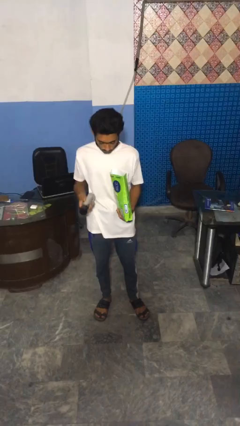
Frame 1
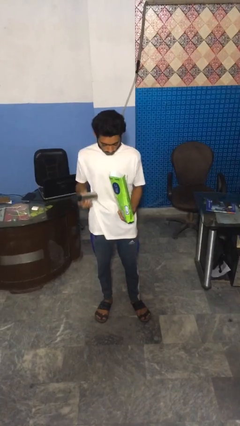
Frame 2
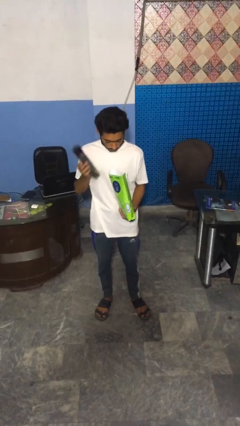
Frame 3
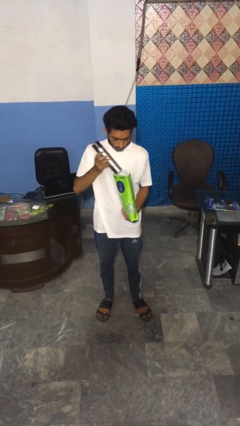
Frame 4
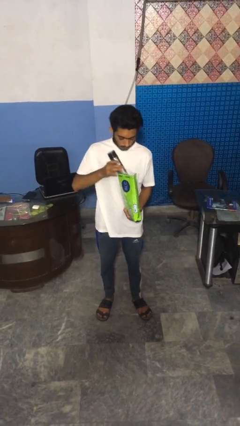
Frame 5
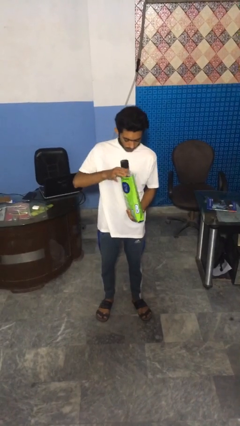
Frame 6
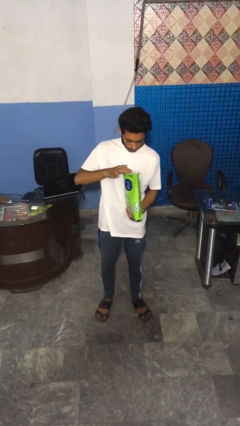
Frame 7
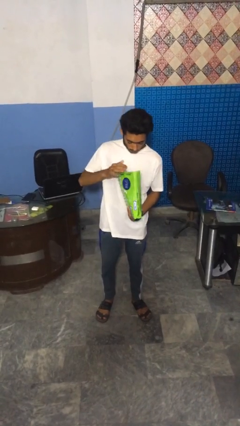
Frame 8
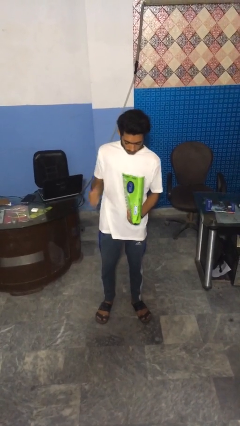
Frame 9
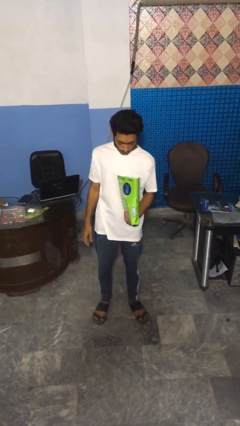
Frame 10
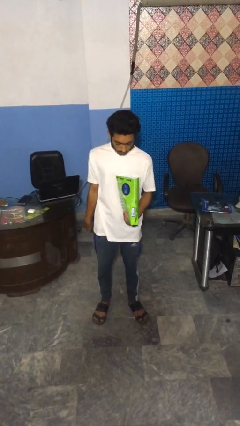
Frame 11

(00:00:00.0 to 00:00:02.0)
person puts object into bag

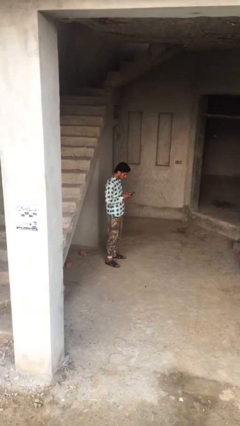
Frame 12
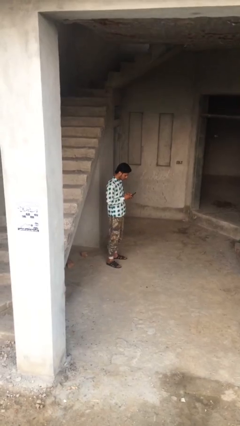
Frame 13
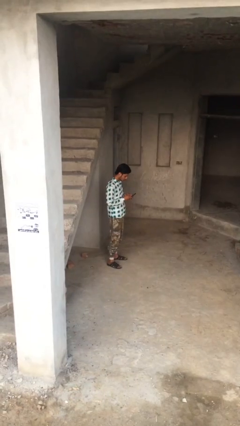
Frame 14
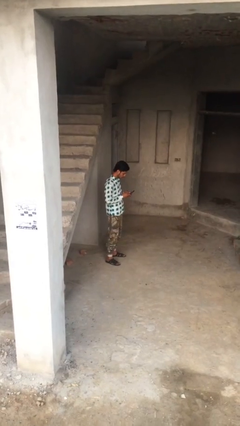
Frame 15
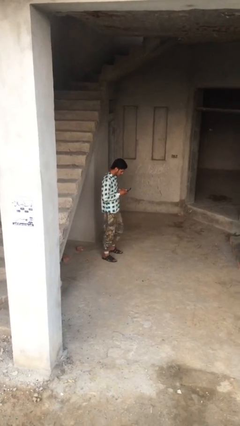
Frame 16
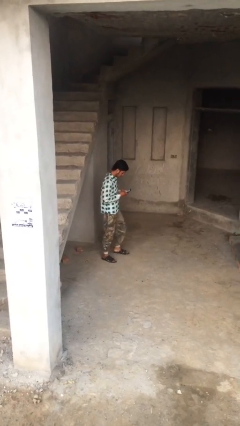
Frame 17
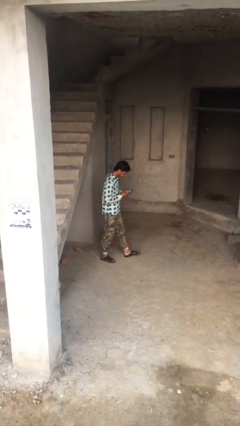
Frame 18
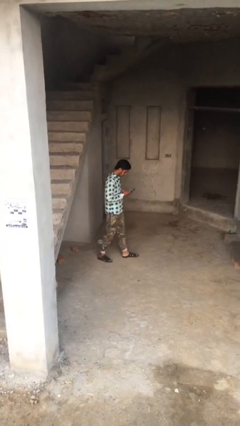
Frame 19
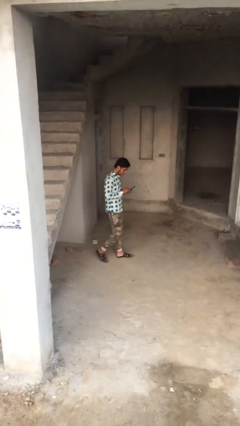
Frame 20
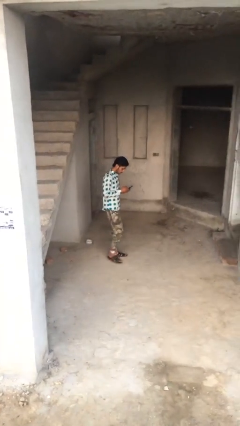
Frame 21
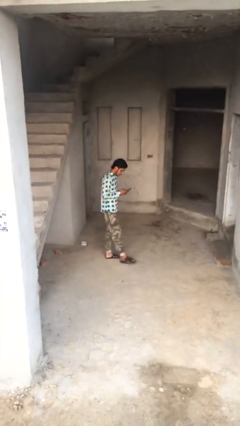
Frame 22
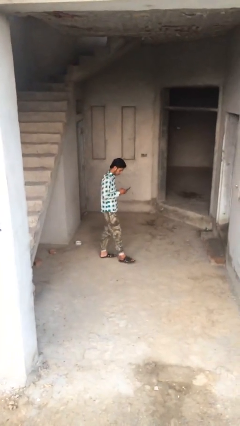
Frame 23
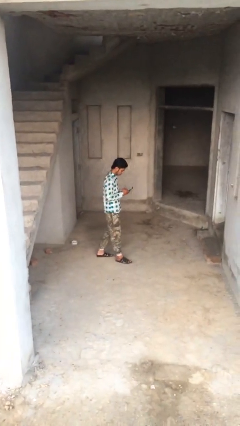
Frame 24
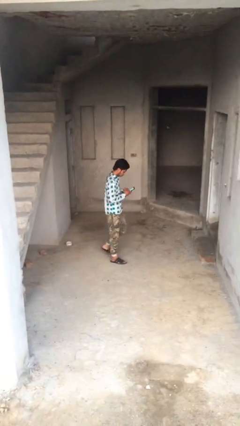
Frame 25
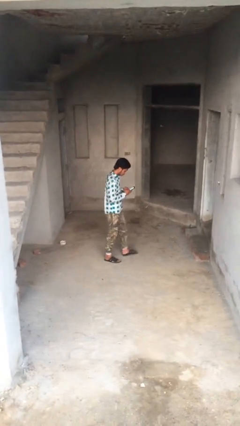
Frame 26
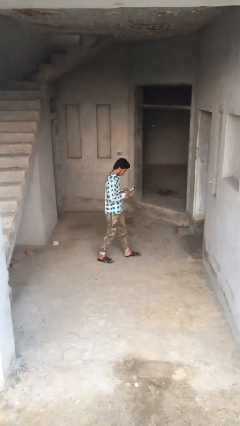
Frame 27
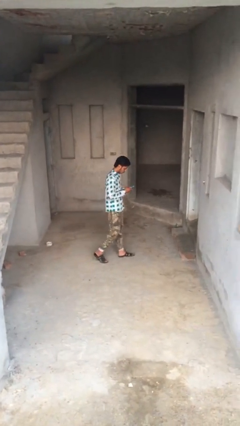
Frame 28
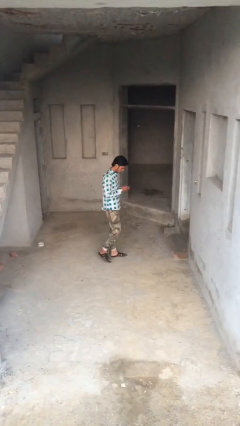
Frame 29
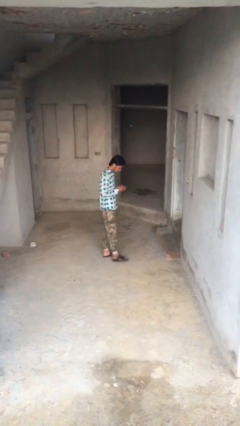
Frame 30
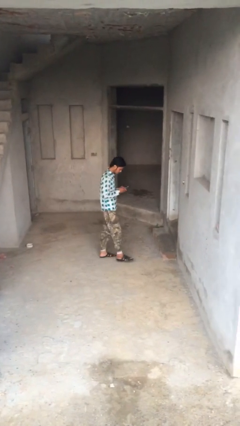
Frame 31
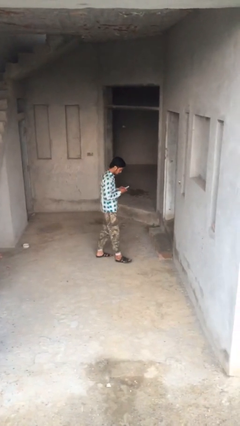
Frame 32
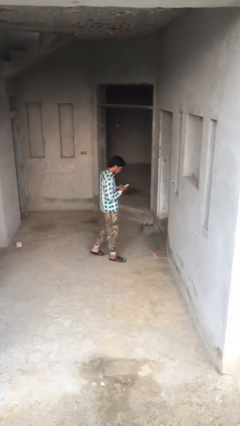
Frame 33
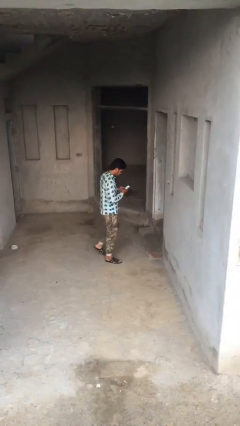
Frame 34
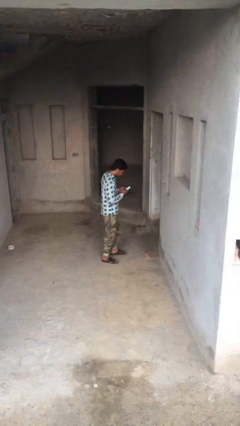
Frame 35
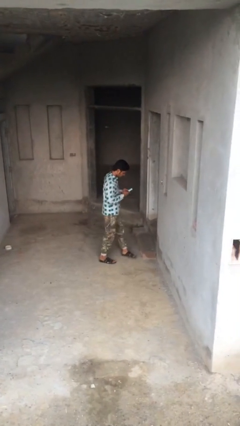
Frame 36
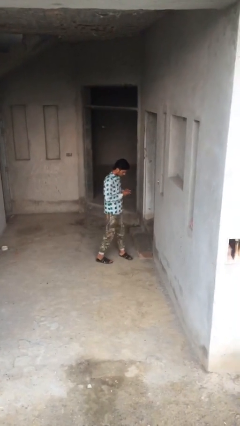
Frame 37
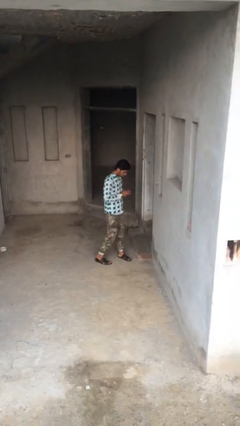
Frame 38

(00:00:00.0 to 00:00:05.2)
person texts on phone

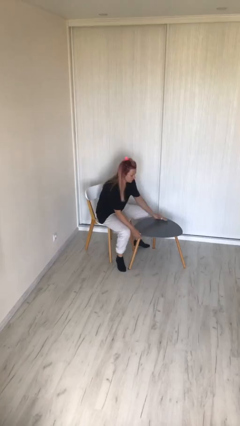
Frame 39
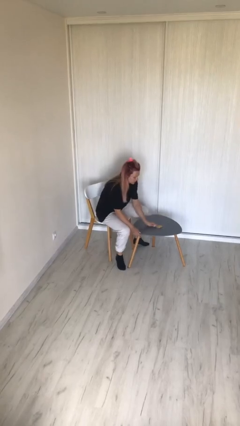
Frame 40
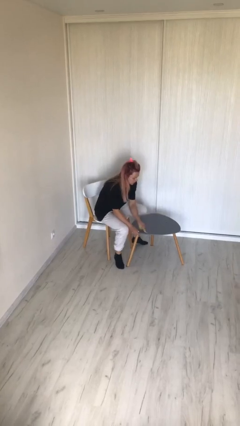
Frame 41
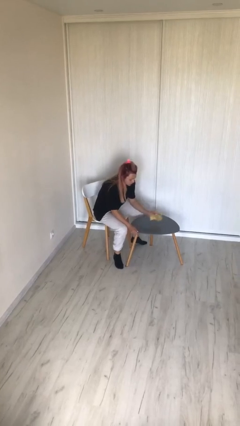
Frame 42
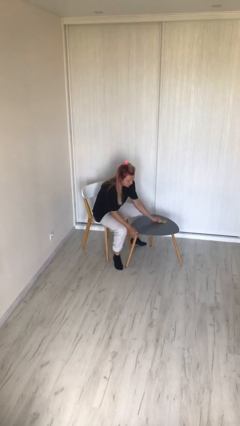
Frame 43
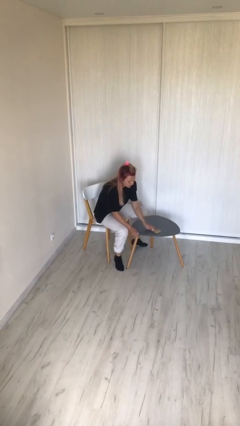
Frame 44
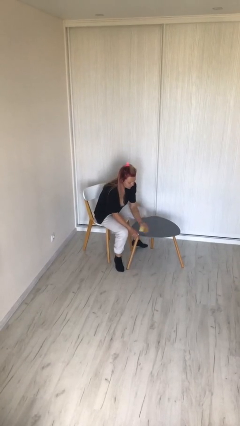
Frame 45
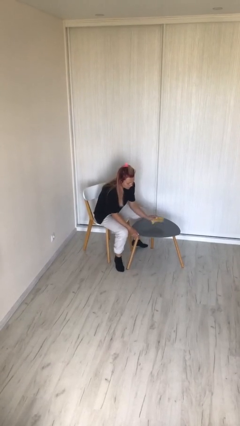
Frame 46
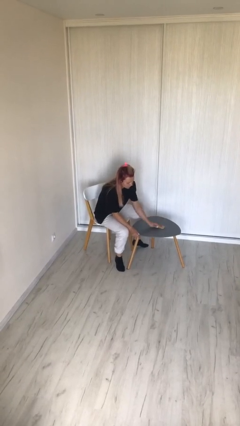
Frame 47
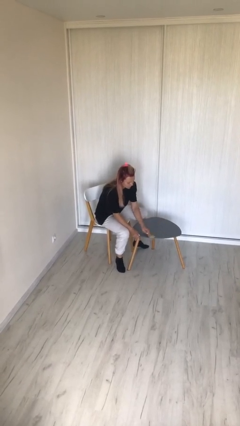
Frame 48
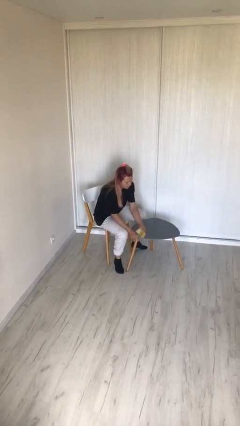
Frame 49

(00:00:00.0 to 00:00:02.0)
person cleans table with rag

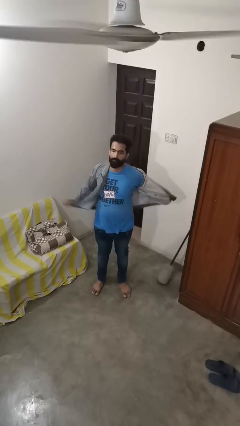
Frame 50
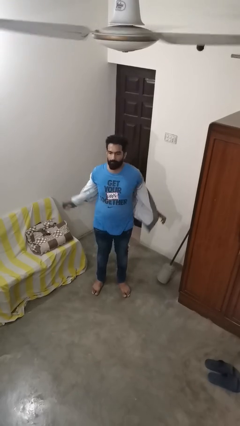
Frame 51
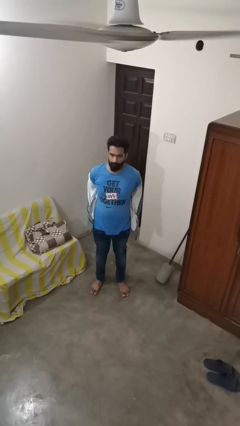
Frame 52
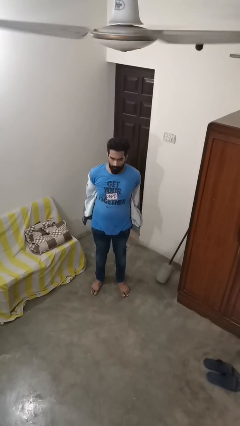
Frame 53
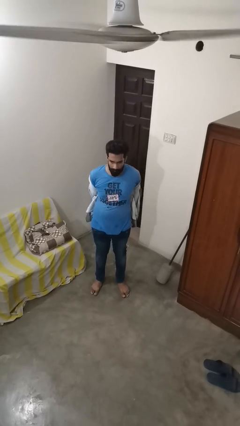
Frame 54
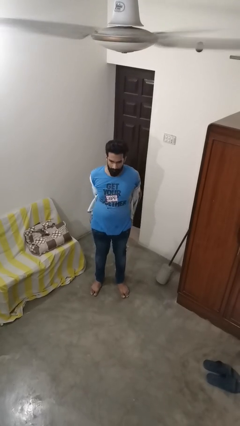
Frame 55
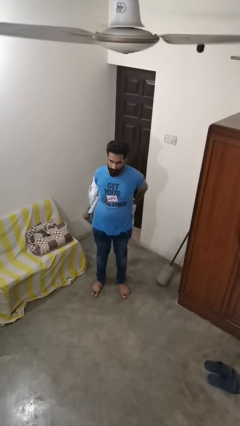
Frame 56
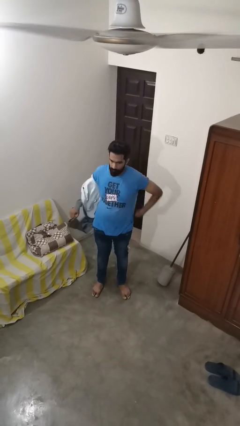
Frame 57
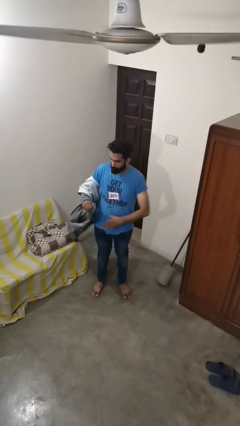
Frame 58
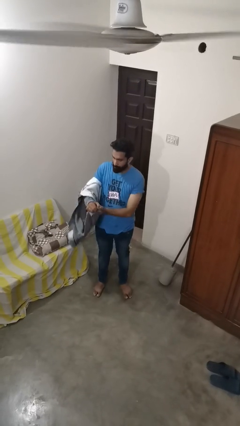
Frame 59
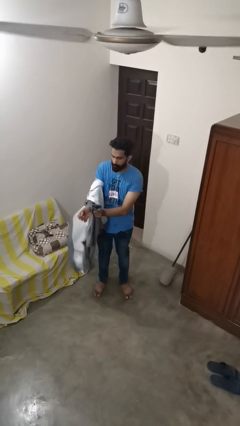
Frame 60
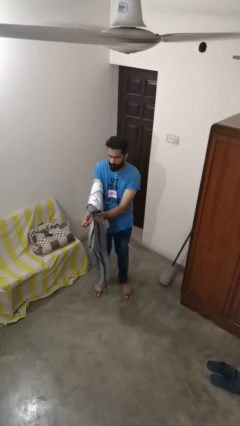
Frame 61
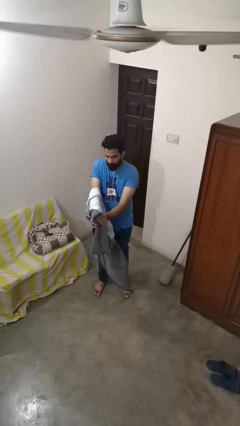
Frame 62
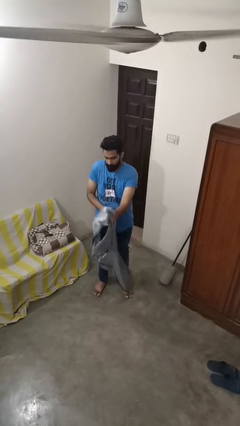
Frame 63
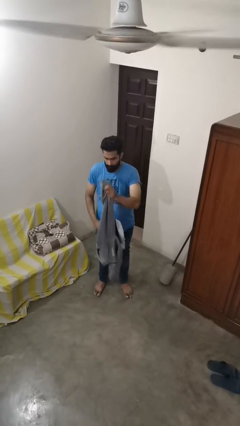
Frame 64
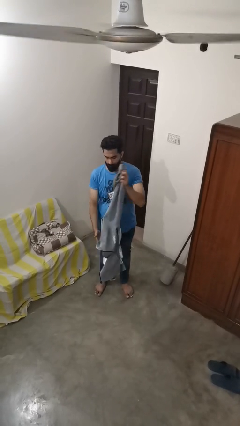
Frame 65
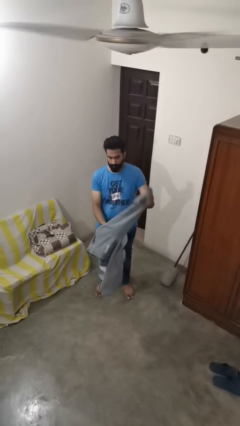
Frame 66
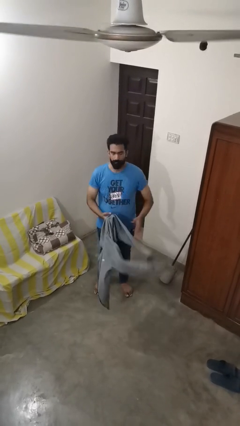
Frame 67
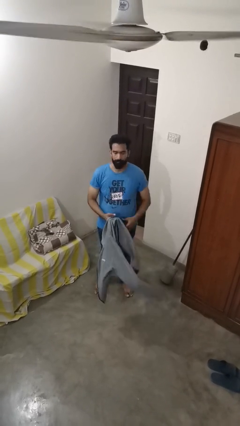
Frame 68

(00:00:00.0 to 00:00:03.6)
person takes off jacket

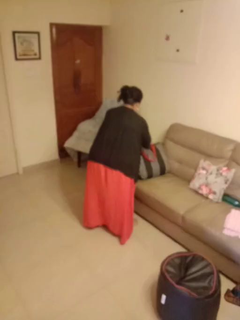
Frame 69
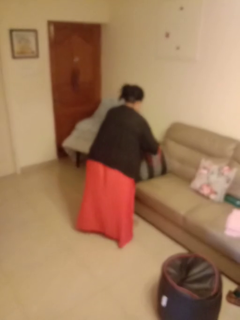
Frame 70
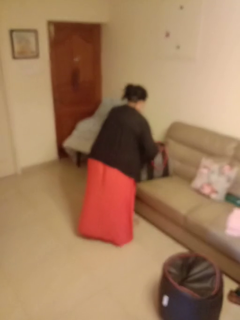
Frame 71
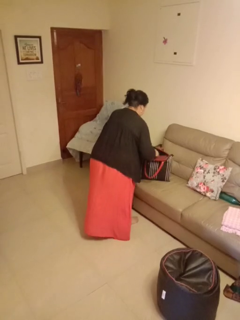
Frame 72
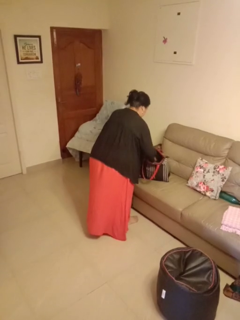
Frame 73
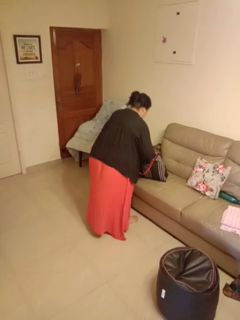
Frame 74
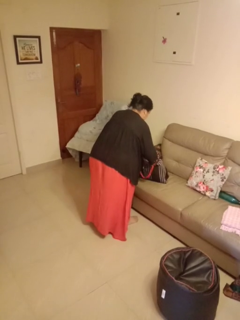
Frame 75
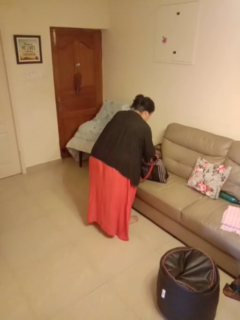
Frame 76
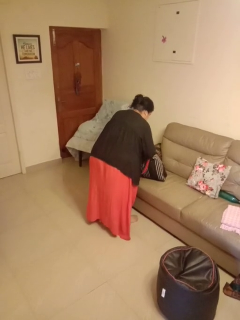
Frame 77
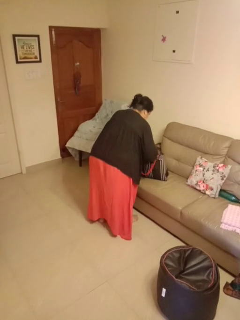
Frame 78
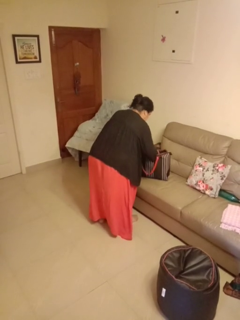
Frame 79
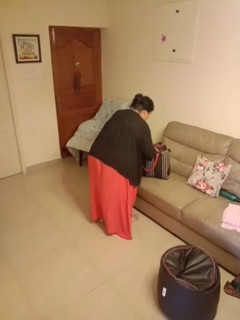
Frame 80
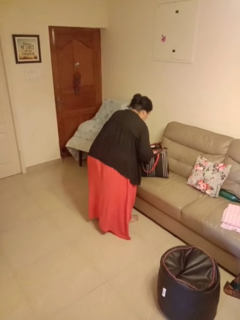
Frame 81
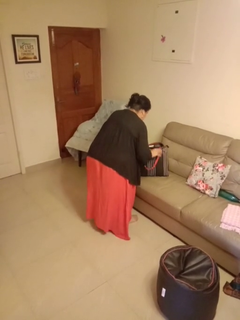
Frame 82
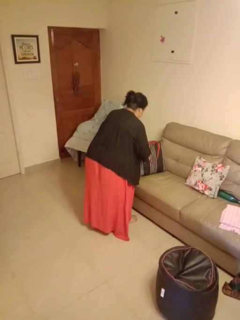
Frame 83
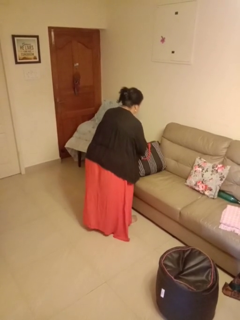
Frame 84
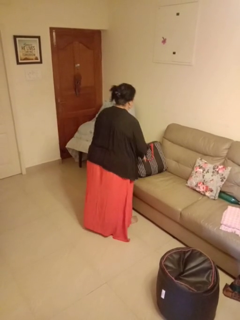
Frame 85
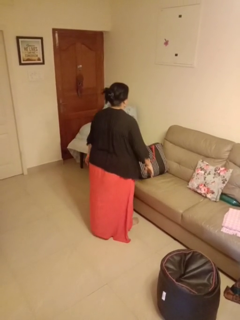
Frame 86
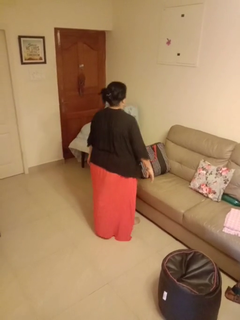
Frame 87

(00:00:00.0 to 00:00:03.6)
person searches in bag

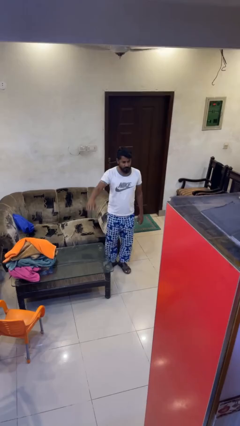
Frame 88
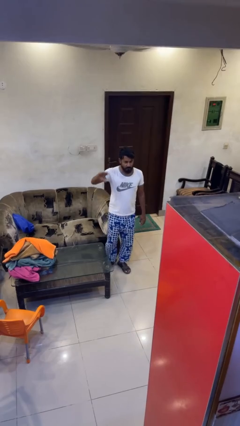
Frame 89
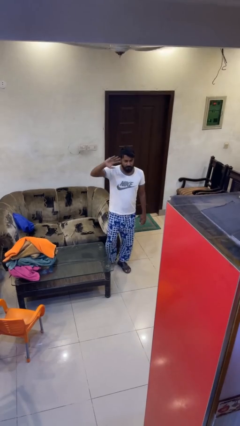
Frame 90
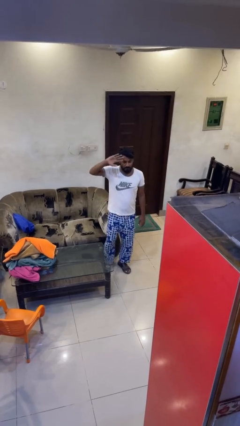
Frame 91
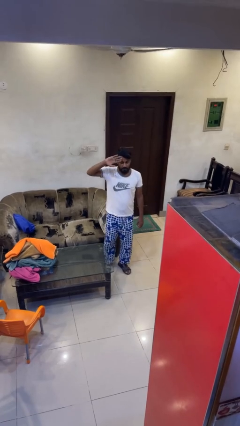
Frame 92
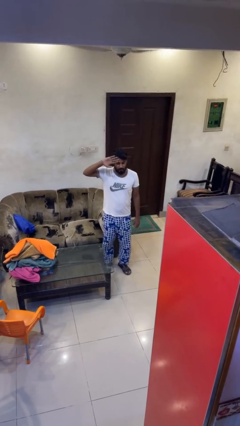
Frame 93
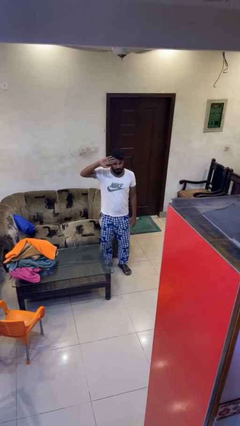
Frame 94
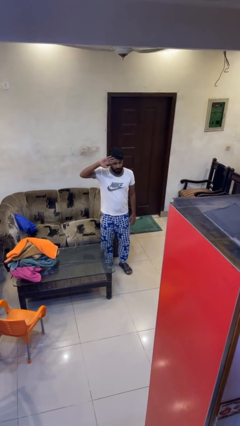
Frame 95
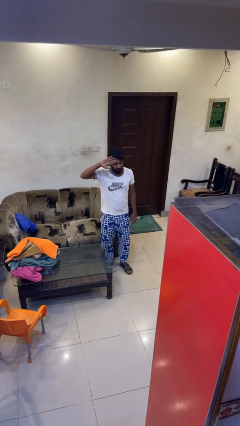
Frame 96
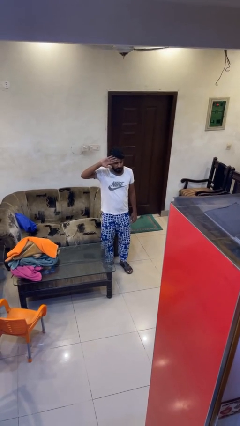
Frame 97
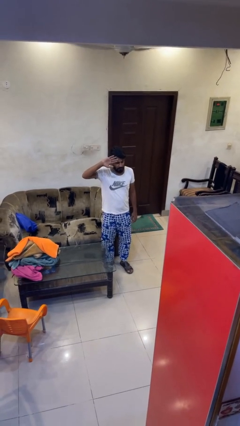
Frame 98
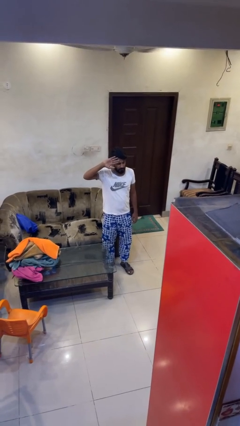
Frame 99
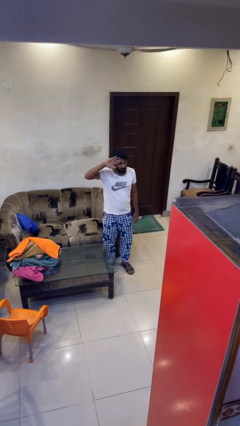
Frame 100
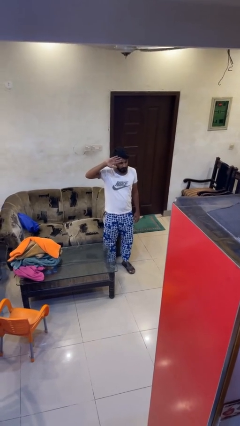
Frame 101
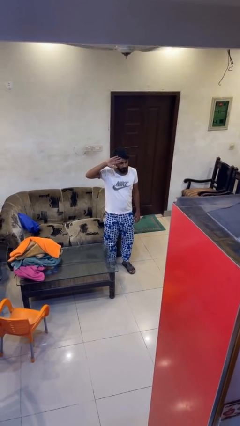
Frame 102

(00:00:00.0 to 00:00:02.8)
person salutes
